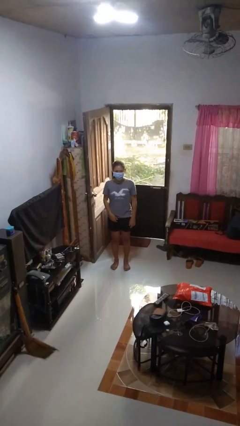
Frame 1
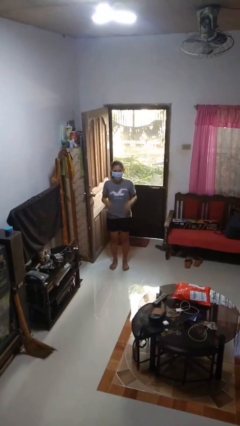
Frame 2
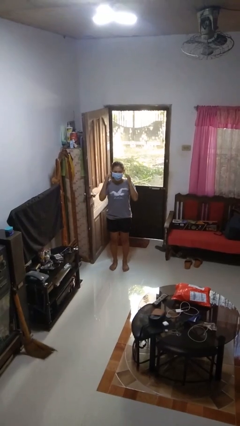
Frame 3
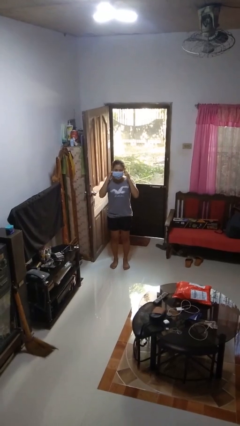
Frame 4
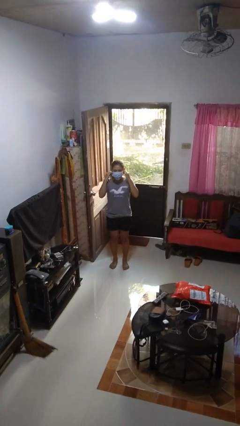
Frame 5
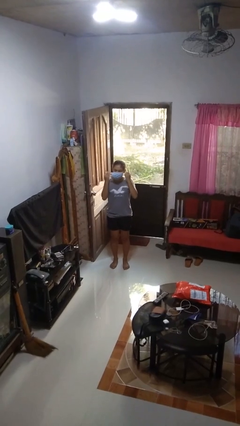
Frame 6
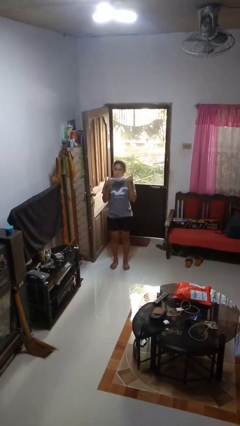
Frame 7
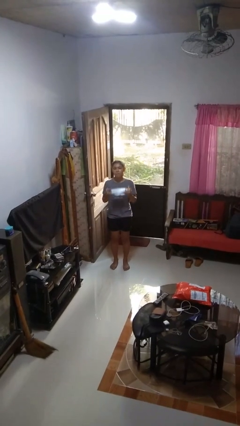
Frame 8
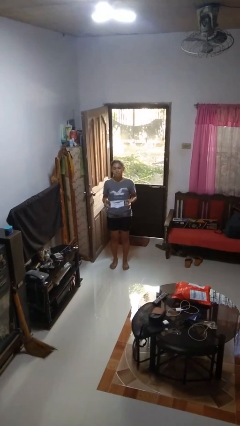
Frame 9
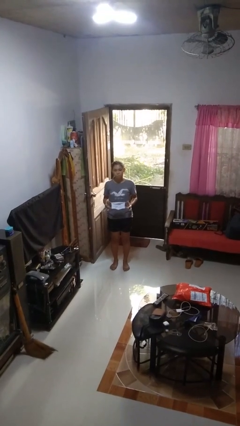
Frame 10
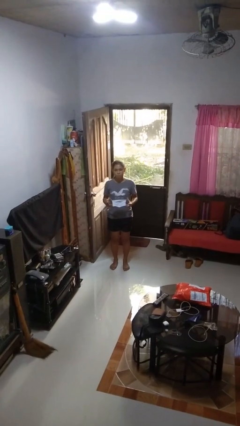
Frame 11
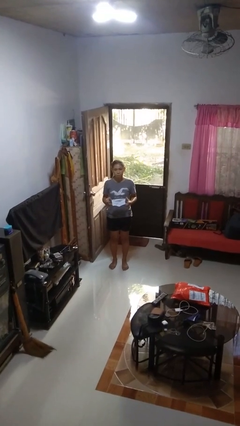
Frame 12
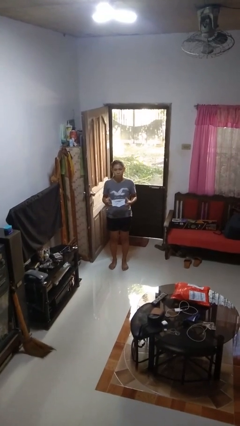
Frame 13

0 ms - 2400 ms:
person takes off facemask

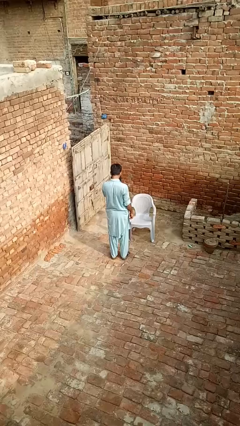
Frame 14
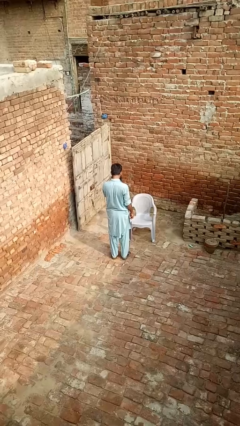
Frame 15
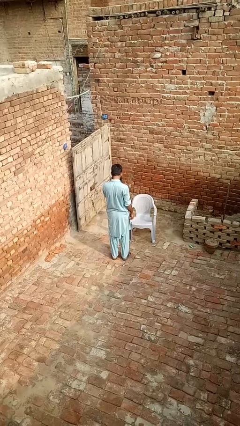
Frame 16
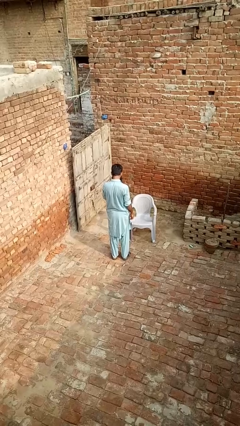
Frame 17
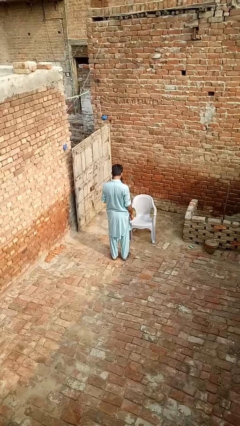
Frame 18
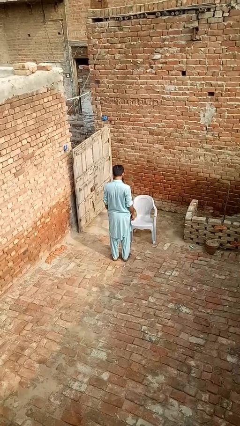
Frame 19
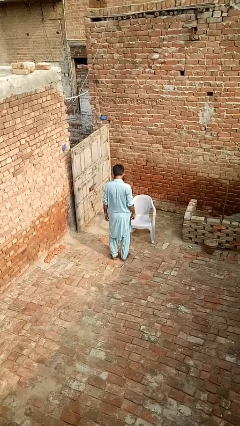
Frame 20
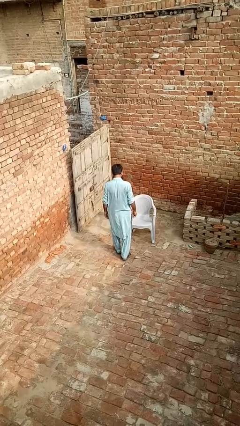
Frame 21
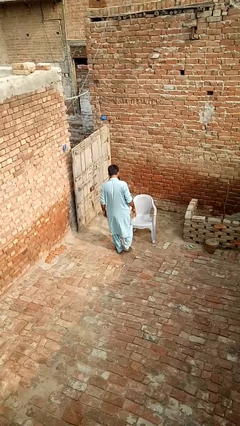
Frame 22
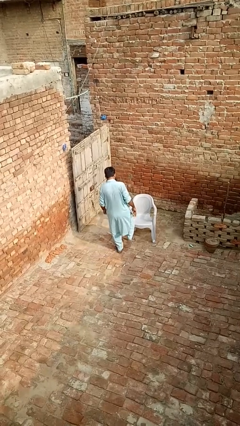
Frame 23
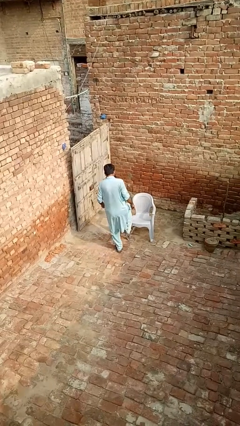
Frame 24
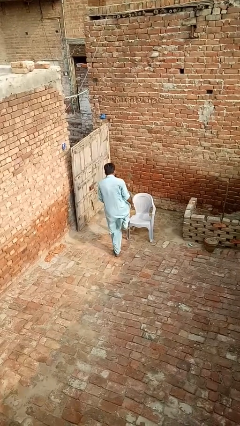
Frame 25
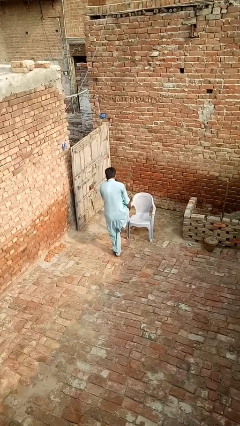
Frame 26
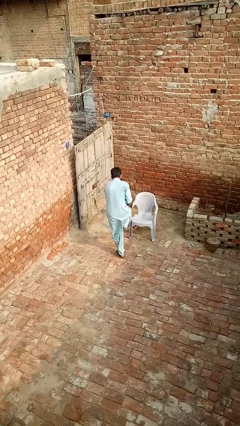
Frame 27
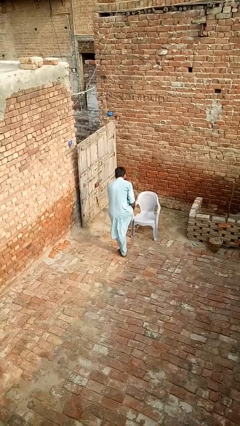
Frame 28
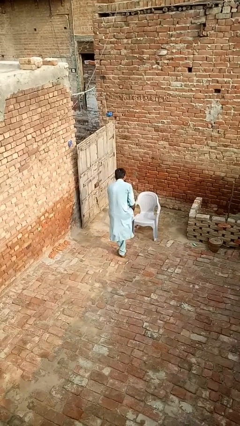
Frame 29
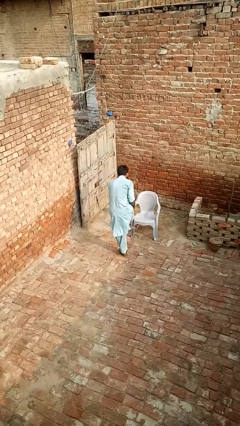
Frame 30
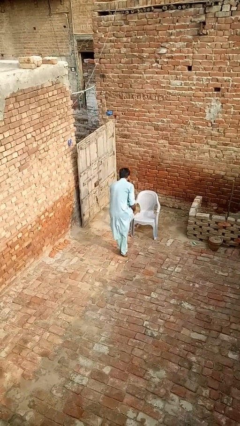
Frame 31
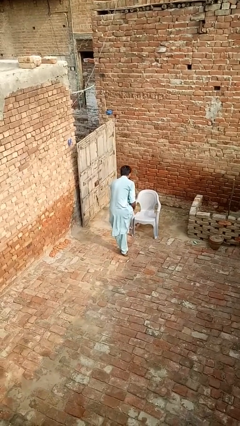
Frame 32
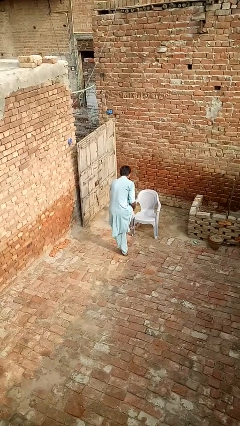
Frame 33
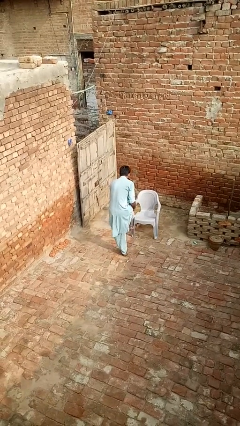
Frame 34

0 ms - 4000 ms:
person stubs toe

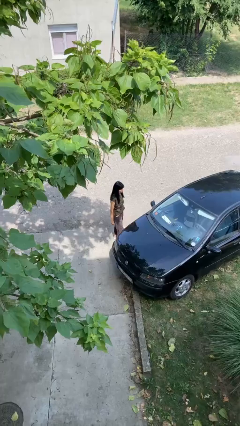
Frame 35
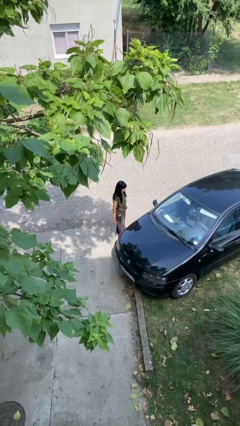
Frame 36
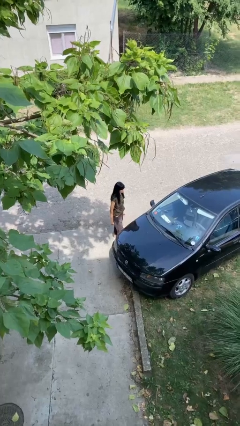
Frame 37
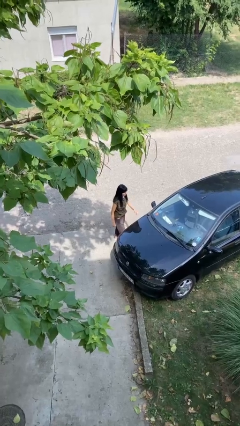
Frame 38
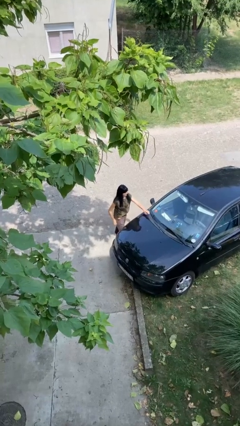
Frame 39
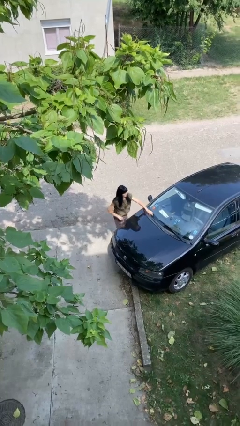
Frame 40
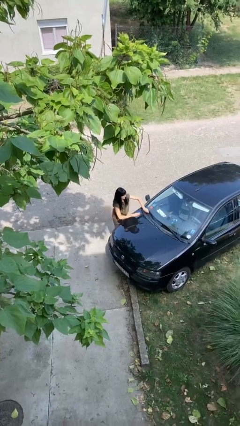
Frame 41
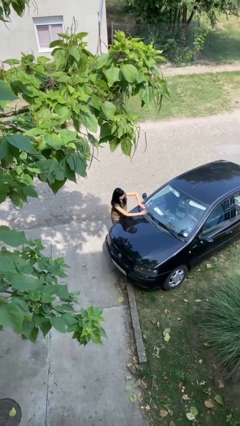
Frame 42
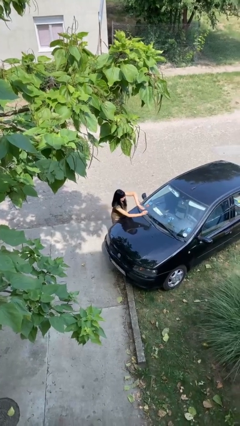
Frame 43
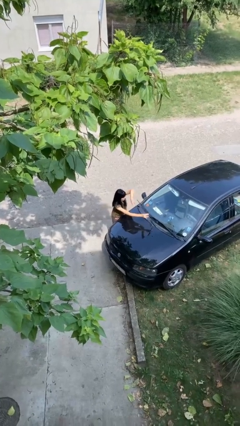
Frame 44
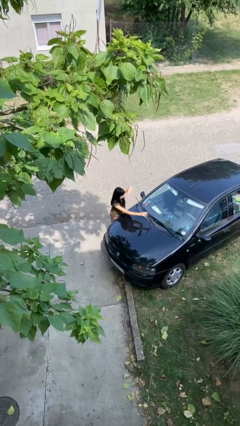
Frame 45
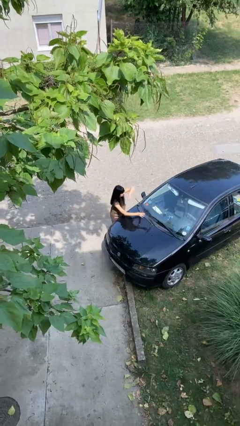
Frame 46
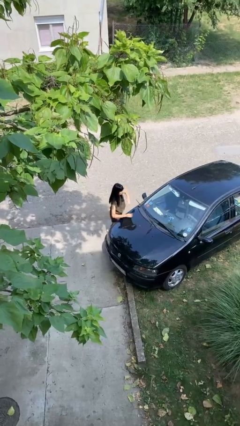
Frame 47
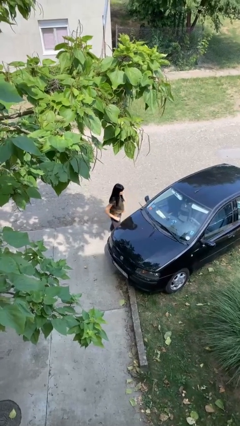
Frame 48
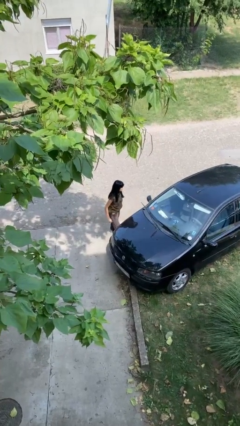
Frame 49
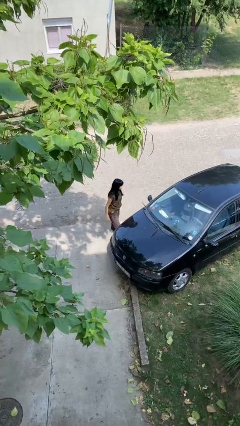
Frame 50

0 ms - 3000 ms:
person flips up car wipers

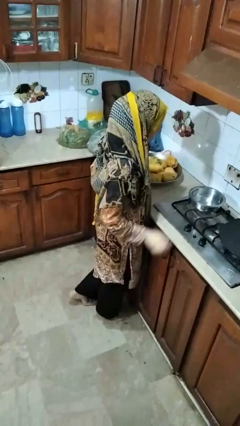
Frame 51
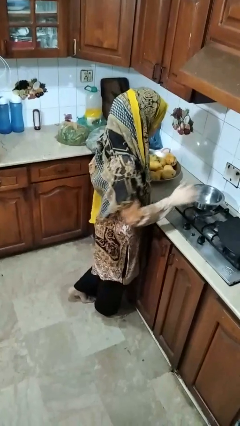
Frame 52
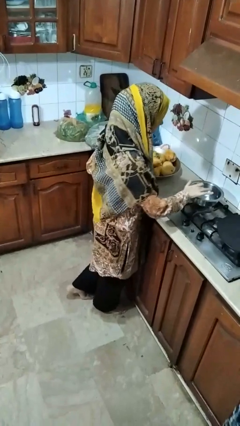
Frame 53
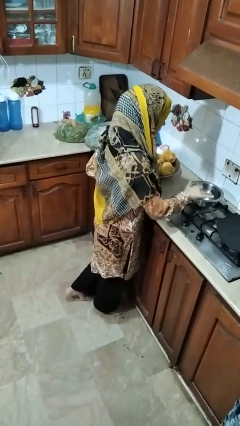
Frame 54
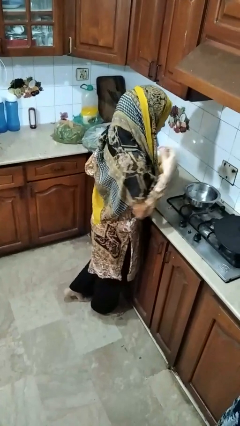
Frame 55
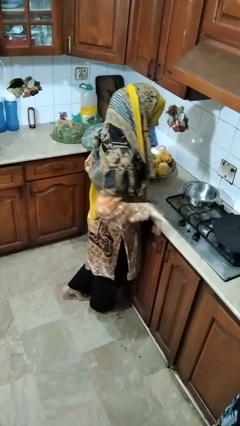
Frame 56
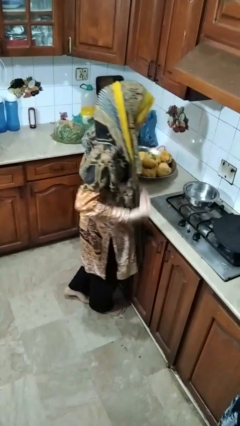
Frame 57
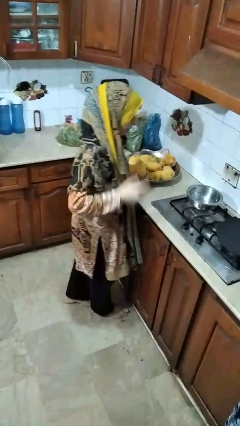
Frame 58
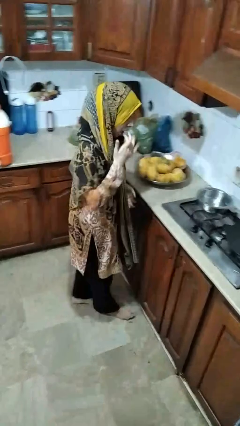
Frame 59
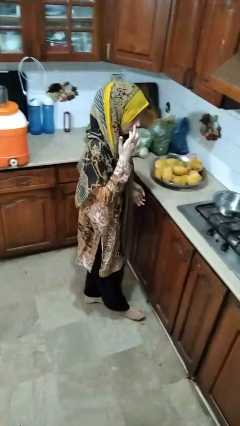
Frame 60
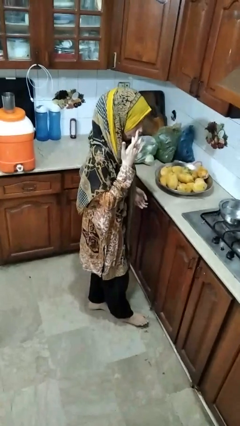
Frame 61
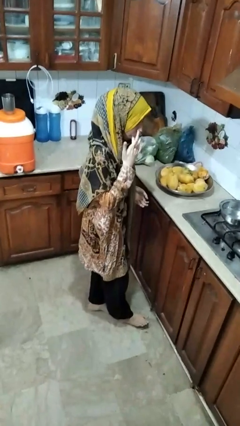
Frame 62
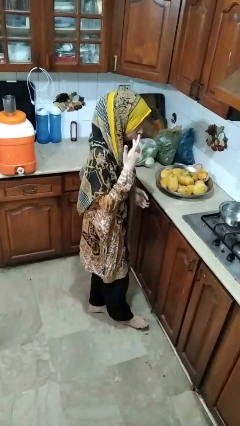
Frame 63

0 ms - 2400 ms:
person burns hand

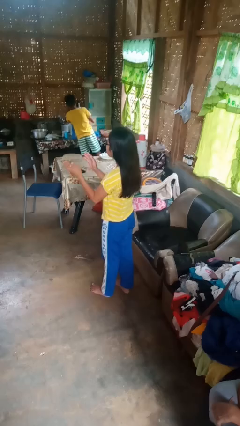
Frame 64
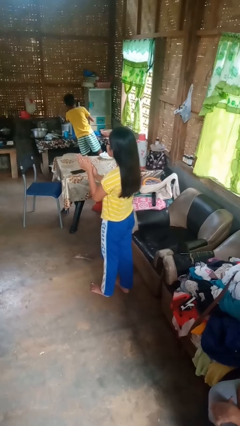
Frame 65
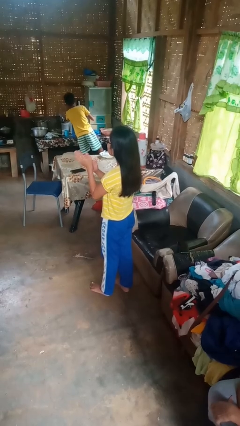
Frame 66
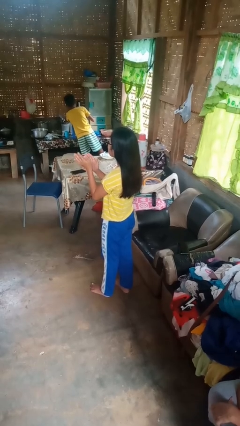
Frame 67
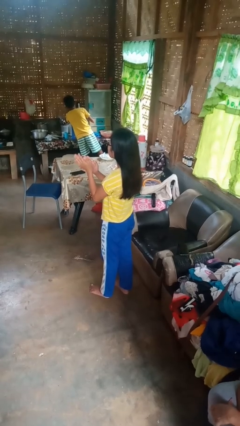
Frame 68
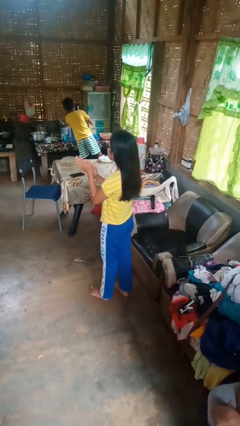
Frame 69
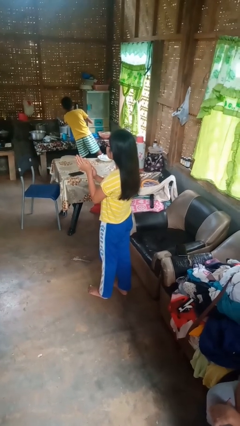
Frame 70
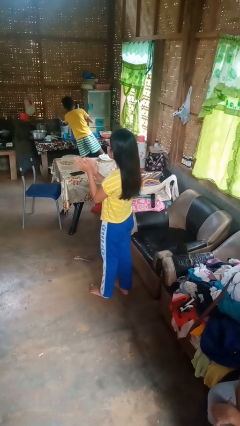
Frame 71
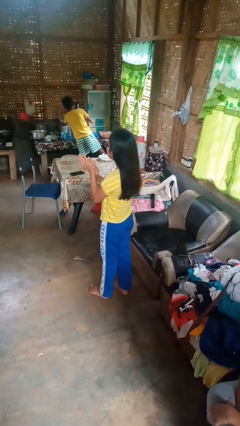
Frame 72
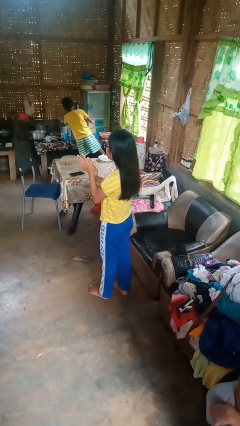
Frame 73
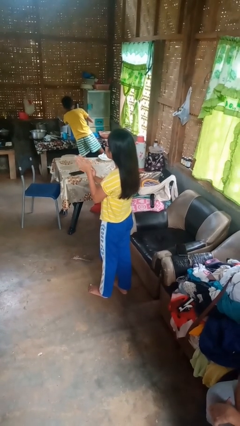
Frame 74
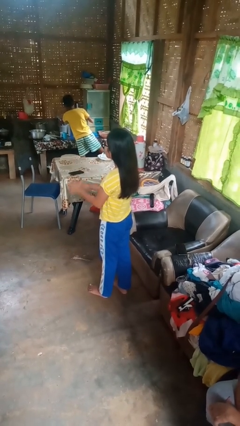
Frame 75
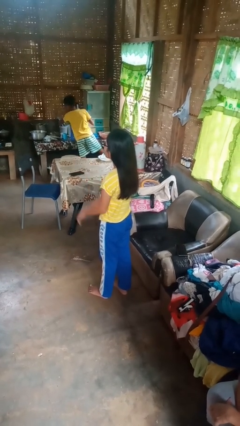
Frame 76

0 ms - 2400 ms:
person claps hands

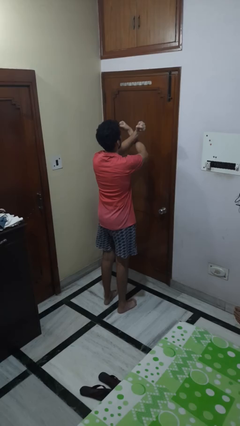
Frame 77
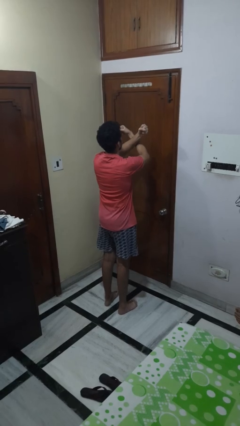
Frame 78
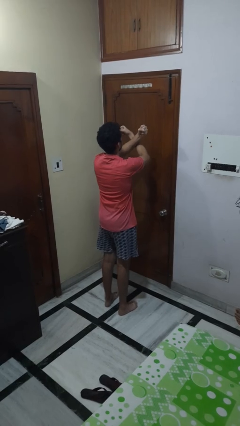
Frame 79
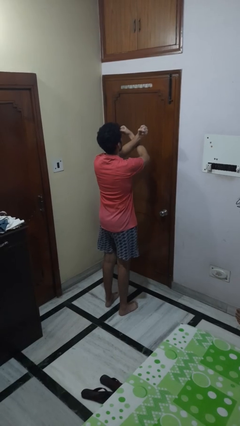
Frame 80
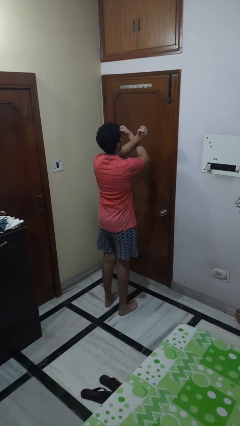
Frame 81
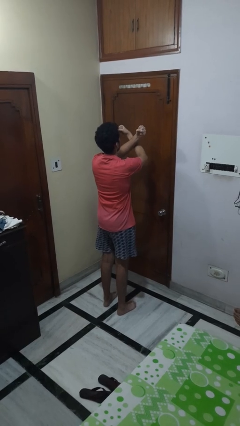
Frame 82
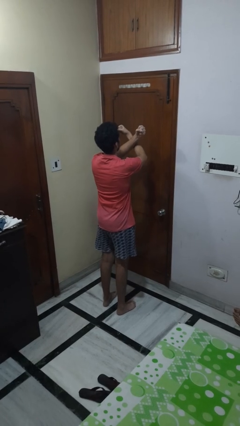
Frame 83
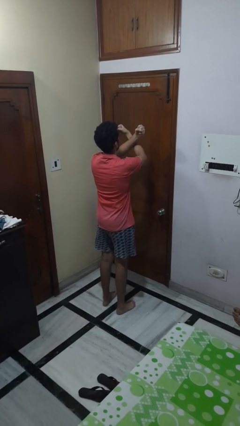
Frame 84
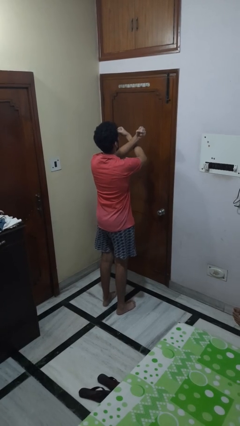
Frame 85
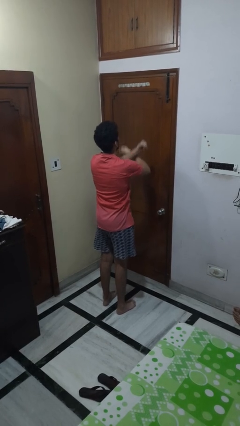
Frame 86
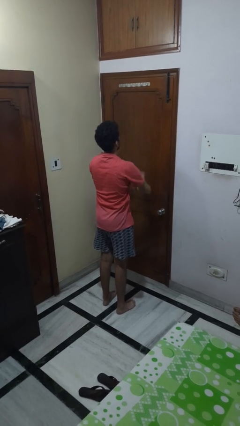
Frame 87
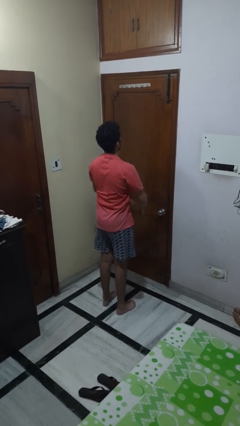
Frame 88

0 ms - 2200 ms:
person gestures arms x

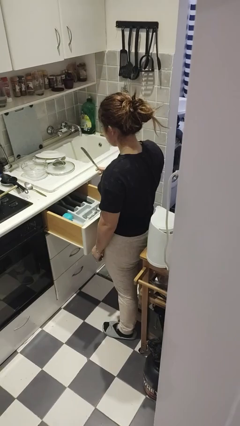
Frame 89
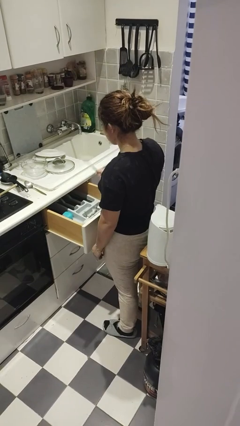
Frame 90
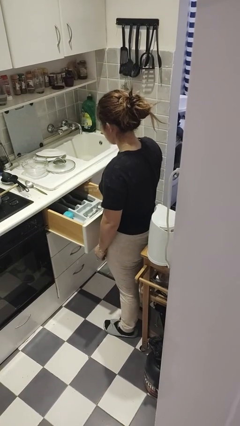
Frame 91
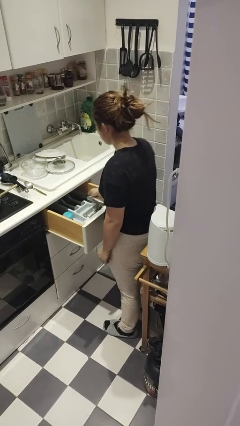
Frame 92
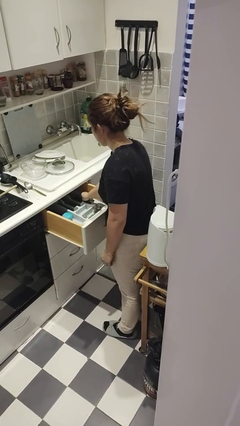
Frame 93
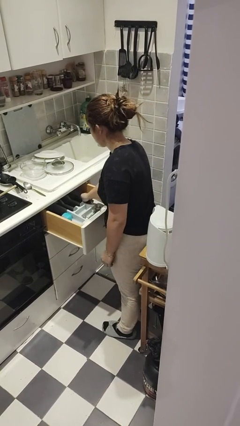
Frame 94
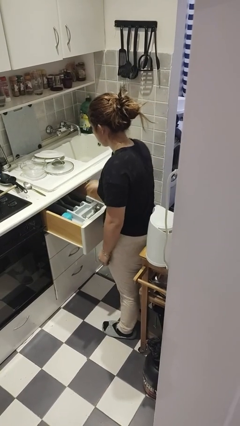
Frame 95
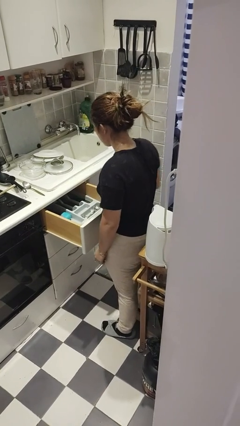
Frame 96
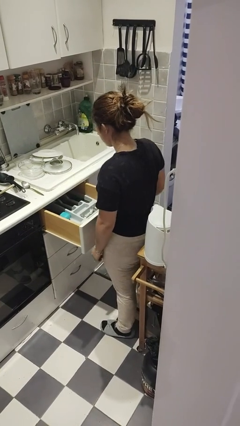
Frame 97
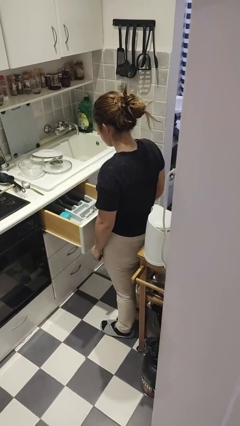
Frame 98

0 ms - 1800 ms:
person puts object into kitchen drawer
